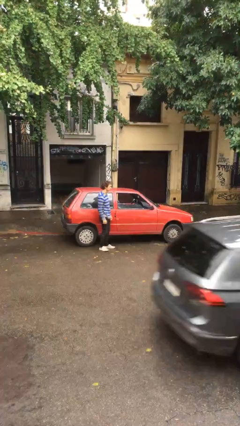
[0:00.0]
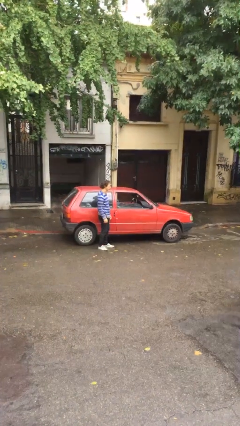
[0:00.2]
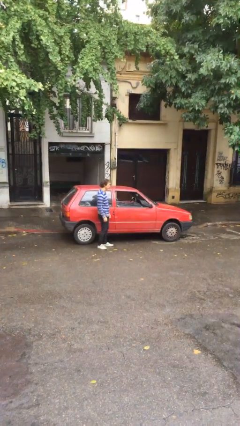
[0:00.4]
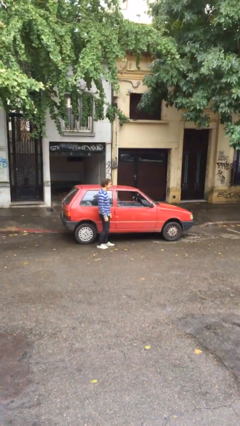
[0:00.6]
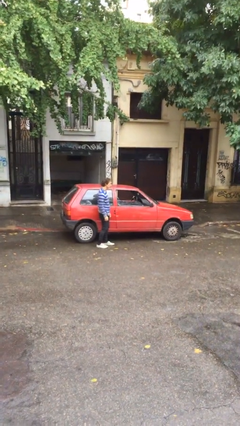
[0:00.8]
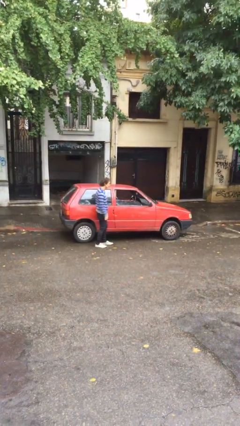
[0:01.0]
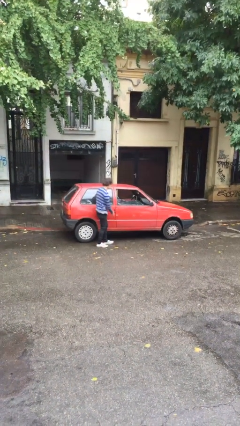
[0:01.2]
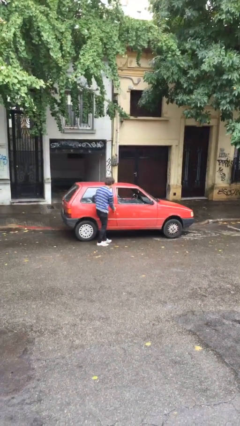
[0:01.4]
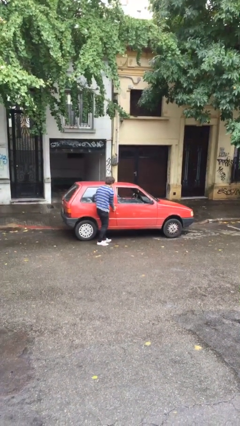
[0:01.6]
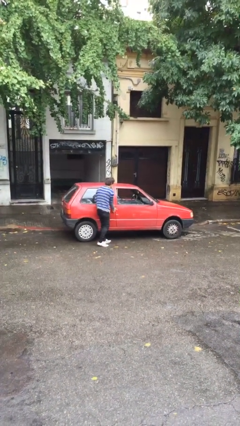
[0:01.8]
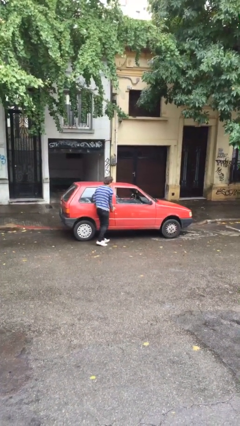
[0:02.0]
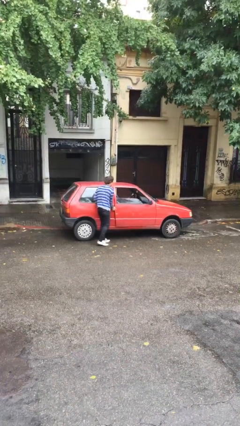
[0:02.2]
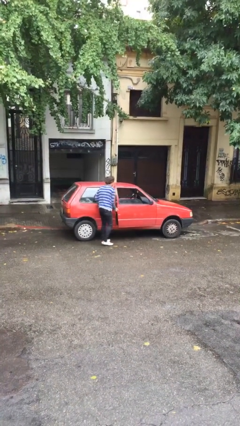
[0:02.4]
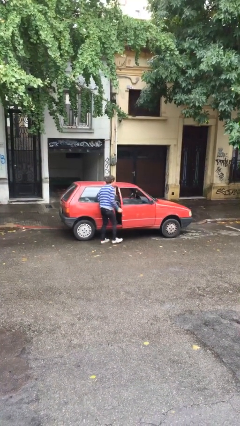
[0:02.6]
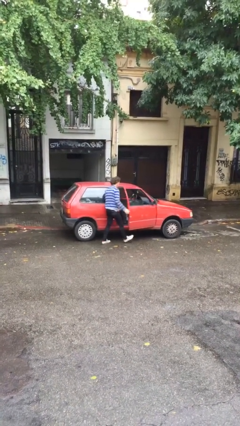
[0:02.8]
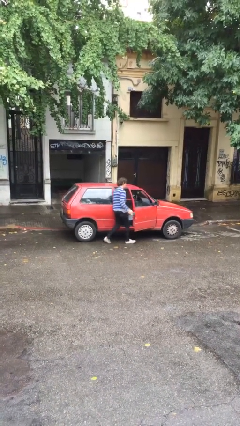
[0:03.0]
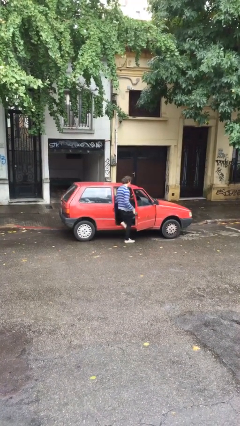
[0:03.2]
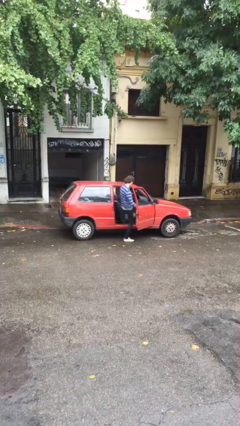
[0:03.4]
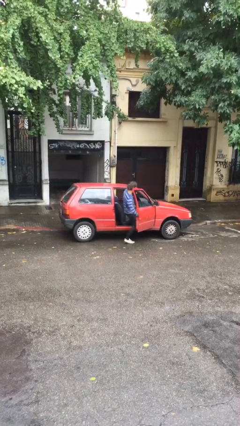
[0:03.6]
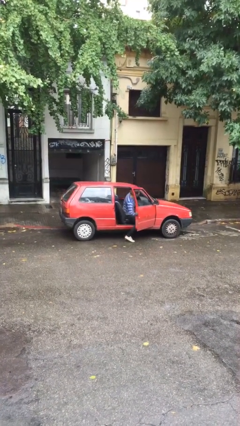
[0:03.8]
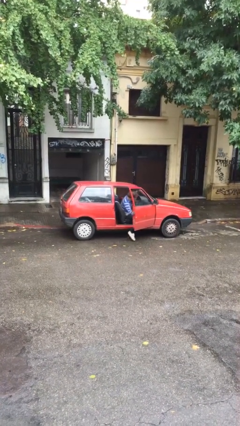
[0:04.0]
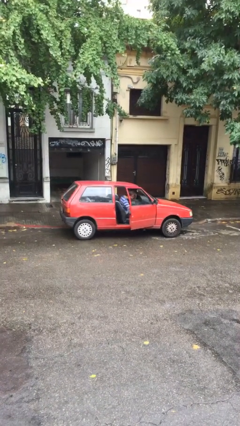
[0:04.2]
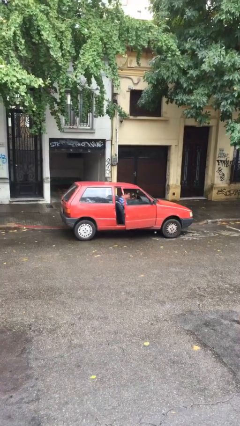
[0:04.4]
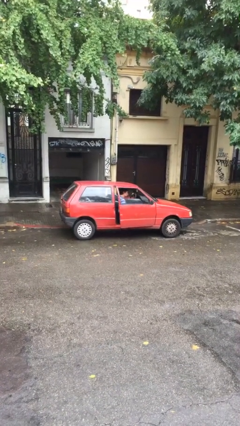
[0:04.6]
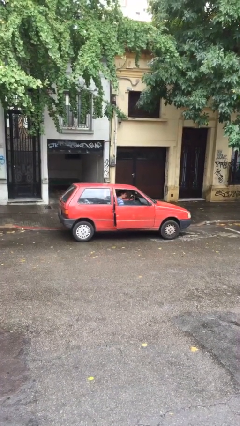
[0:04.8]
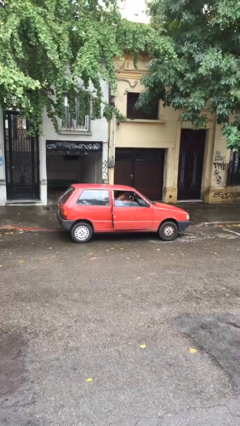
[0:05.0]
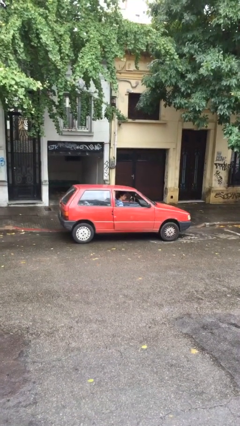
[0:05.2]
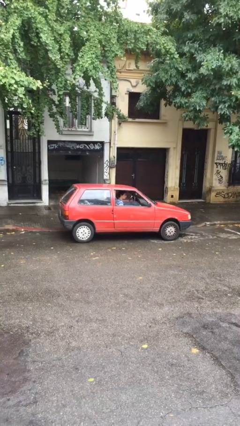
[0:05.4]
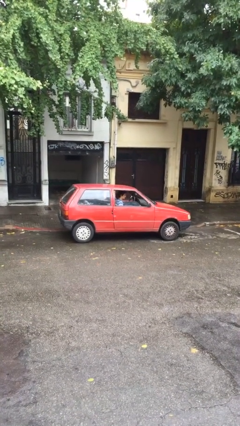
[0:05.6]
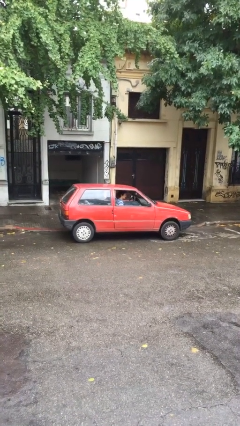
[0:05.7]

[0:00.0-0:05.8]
car picks up person

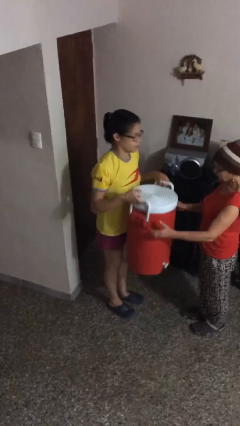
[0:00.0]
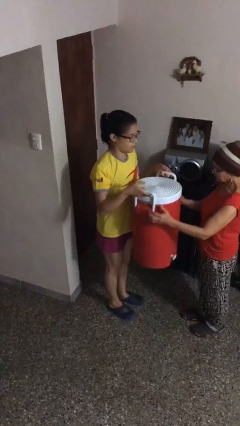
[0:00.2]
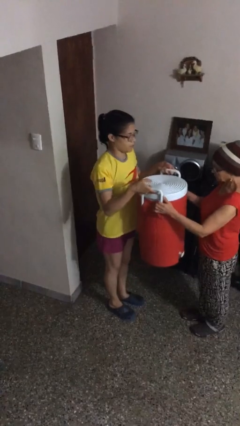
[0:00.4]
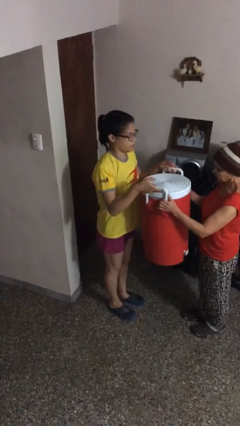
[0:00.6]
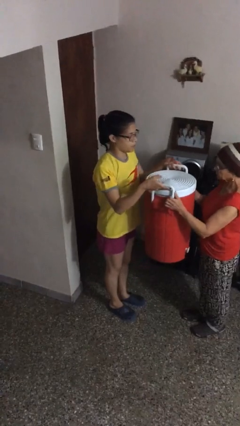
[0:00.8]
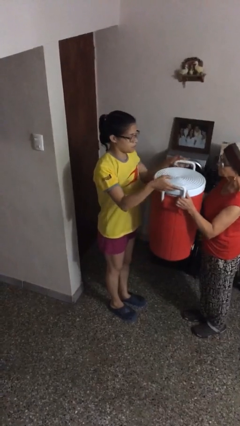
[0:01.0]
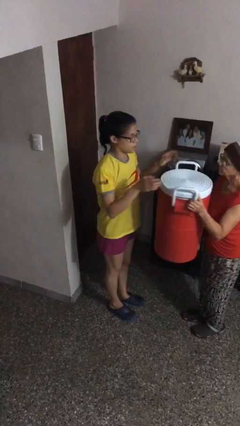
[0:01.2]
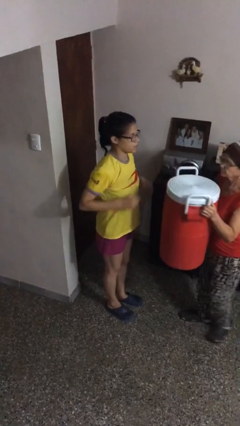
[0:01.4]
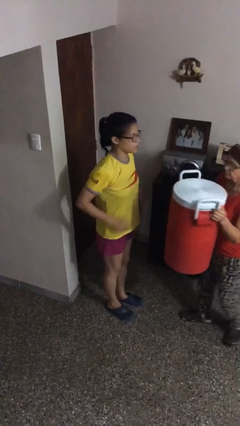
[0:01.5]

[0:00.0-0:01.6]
person transfers object to person

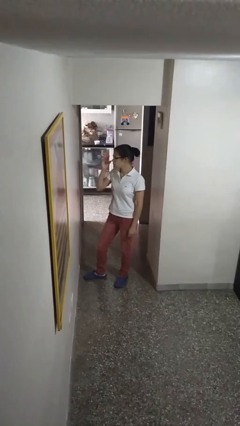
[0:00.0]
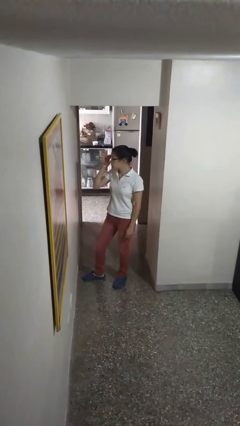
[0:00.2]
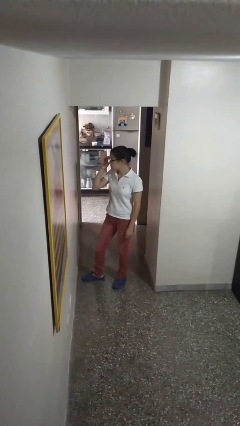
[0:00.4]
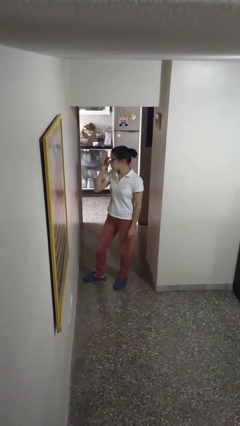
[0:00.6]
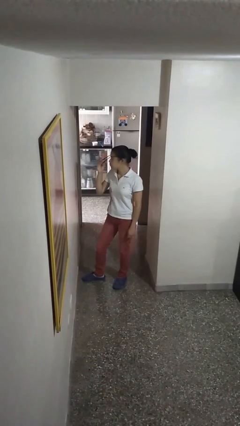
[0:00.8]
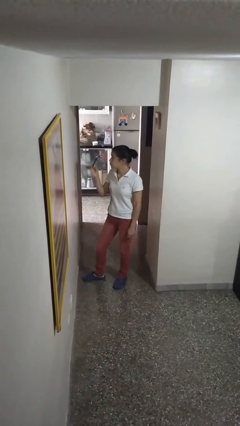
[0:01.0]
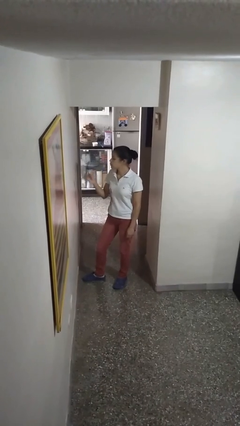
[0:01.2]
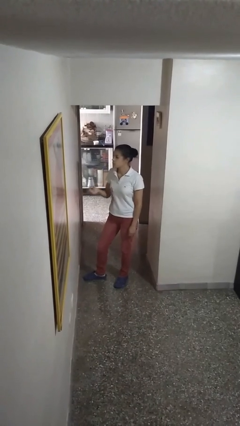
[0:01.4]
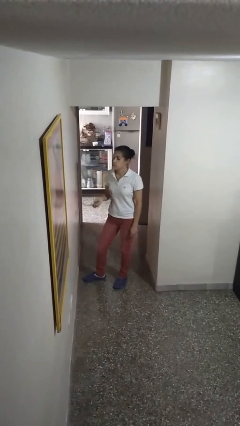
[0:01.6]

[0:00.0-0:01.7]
person takes off glasses

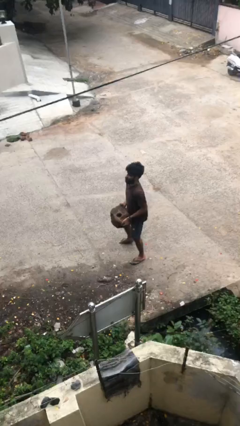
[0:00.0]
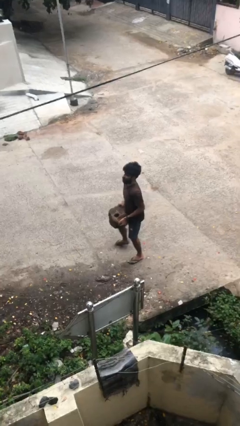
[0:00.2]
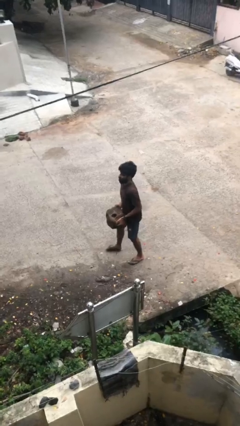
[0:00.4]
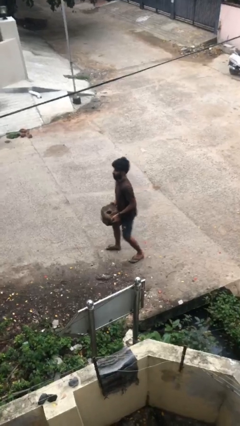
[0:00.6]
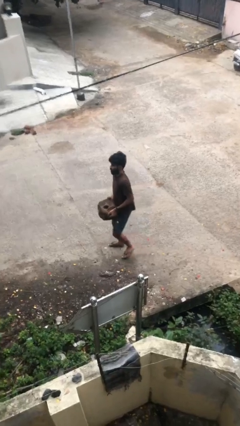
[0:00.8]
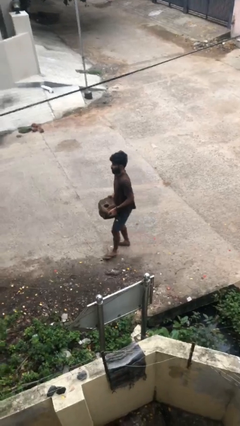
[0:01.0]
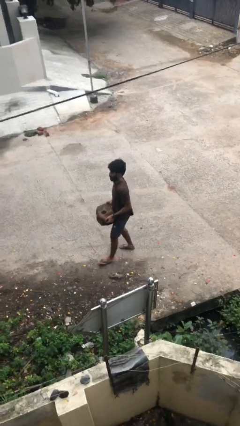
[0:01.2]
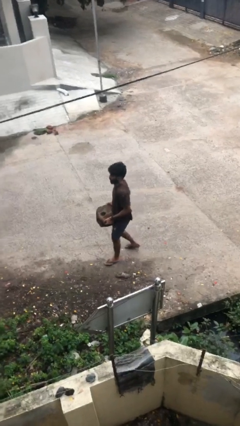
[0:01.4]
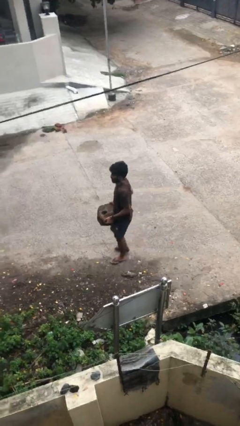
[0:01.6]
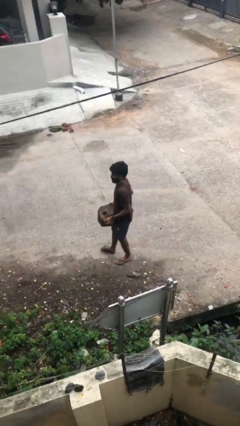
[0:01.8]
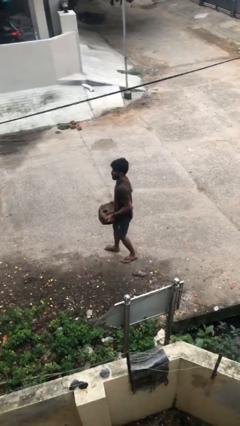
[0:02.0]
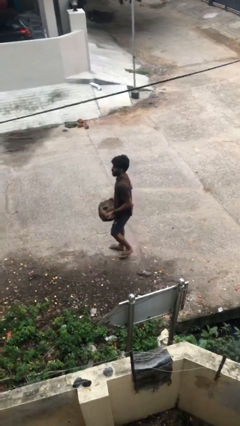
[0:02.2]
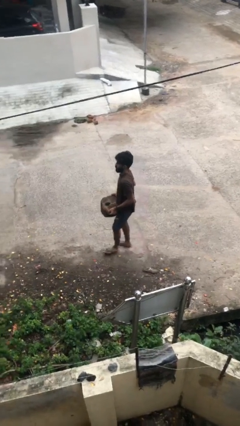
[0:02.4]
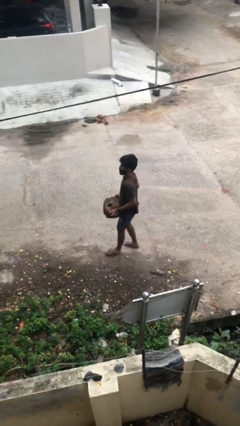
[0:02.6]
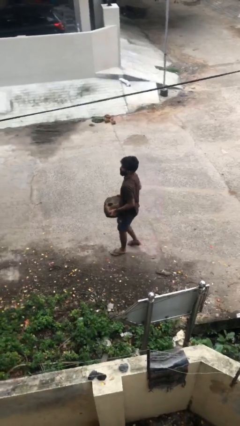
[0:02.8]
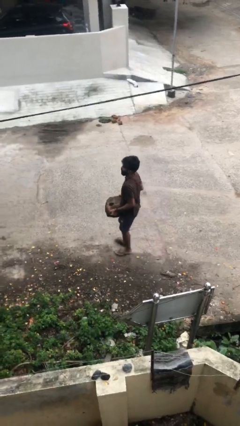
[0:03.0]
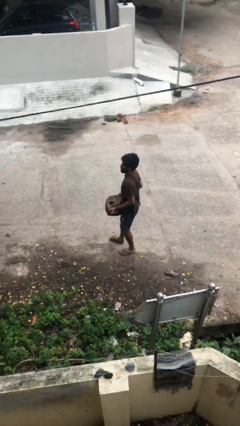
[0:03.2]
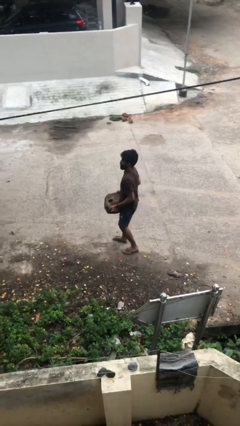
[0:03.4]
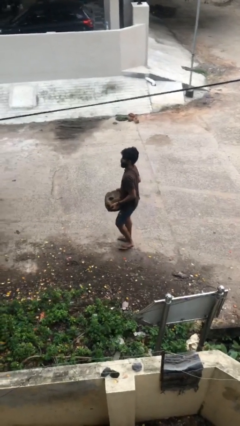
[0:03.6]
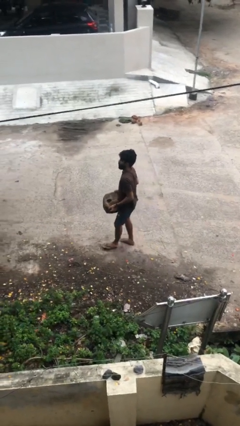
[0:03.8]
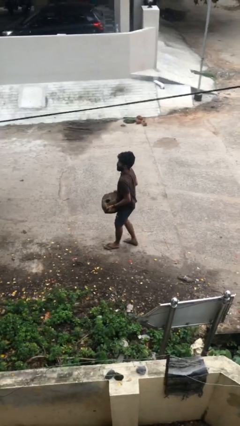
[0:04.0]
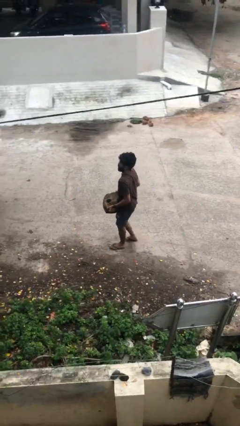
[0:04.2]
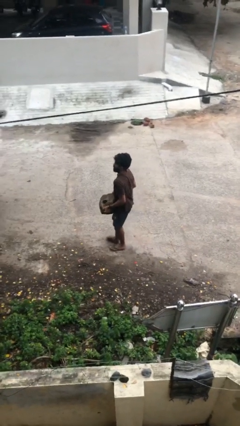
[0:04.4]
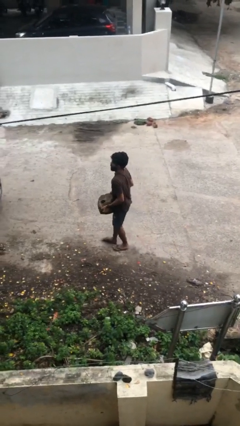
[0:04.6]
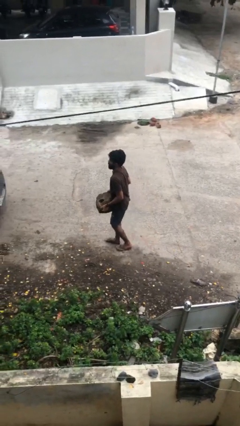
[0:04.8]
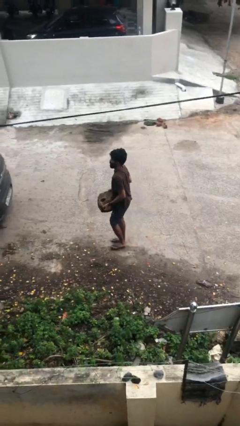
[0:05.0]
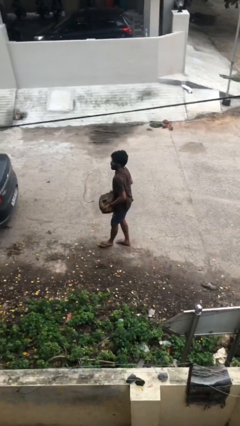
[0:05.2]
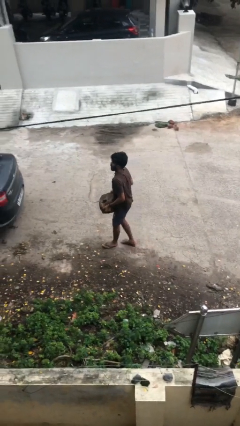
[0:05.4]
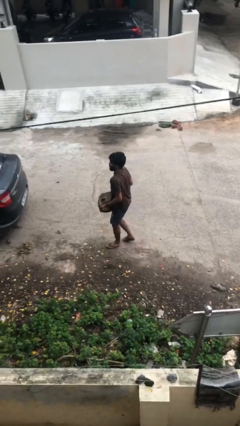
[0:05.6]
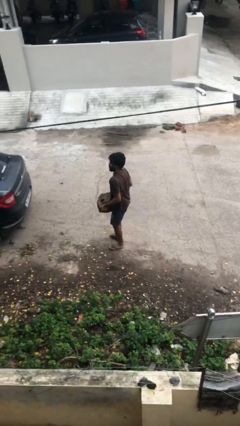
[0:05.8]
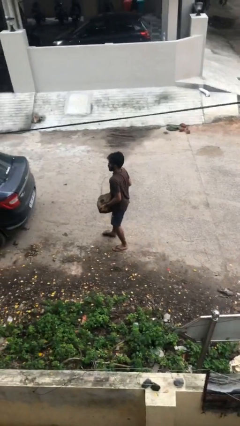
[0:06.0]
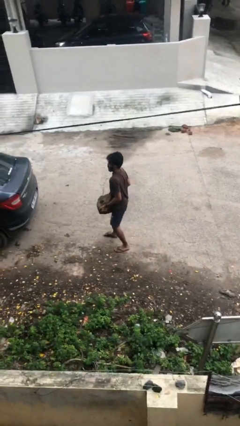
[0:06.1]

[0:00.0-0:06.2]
person carries heavy object

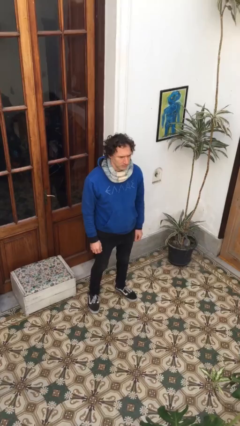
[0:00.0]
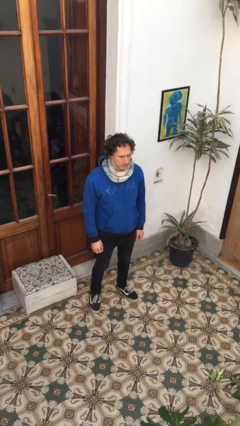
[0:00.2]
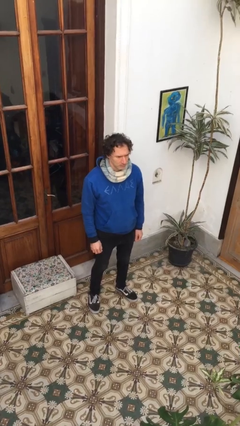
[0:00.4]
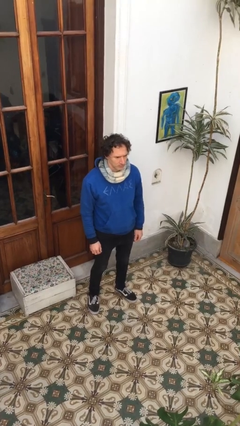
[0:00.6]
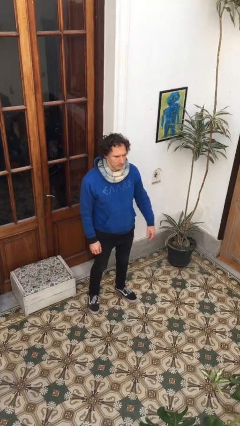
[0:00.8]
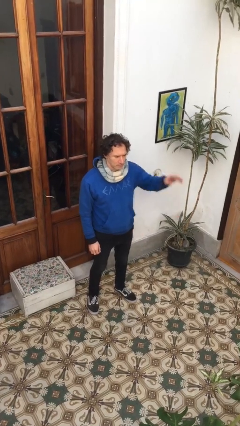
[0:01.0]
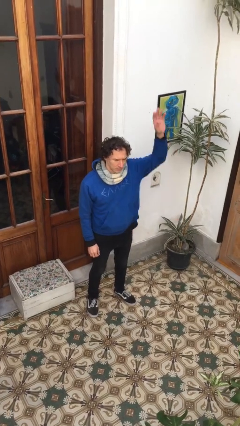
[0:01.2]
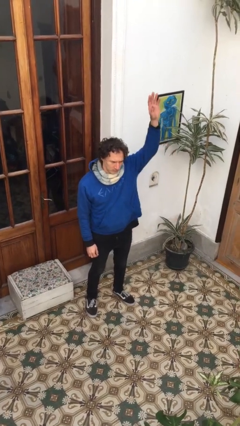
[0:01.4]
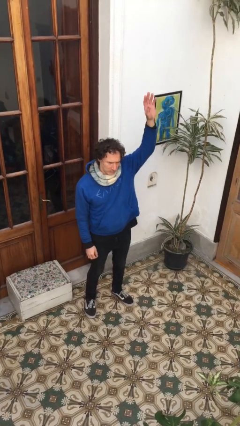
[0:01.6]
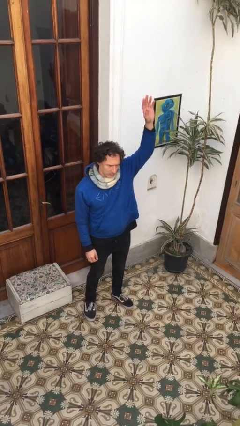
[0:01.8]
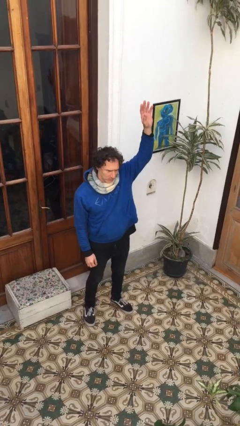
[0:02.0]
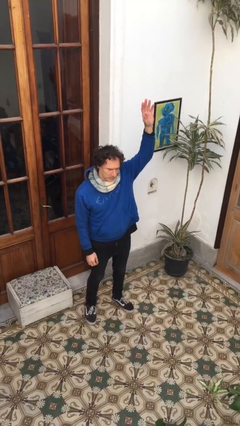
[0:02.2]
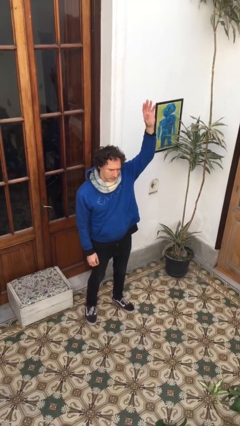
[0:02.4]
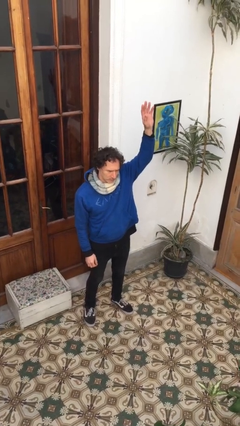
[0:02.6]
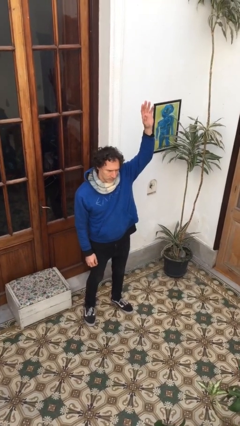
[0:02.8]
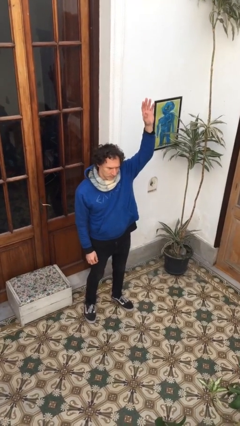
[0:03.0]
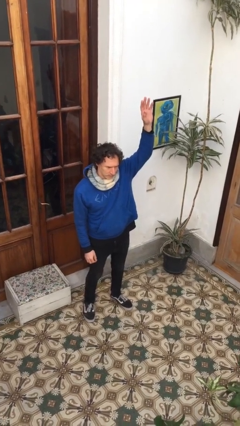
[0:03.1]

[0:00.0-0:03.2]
person gestures raise hand
